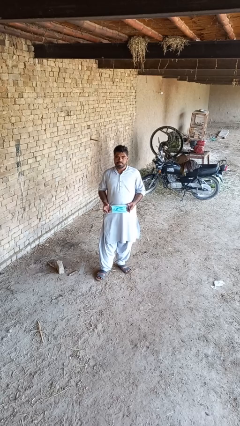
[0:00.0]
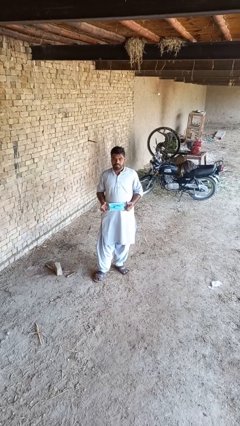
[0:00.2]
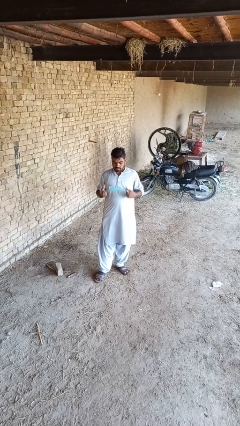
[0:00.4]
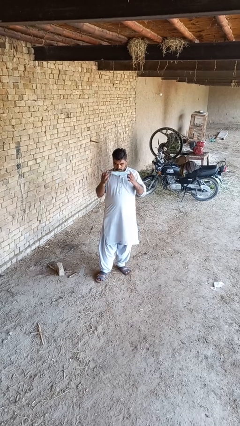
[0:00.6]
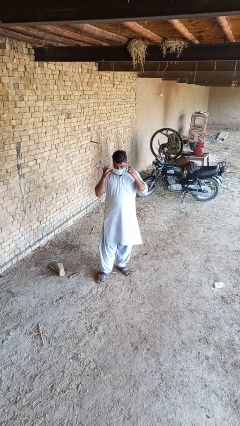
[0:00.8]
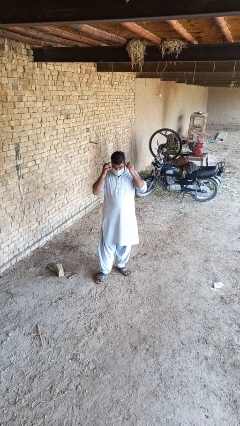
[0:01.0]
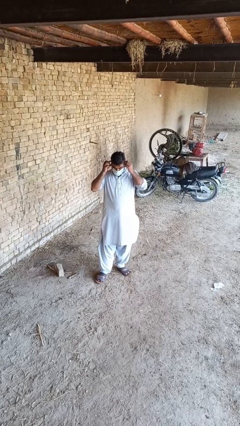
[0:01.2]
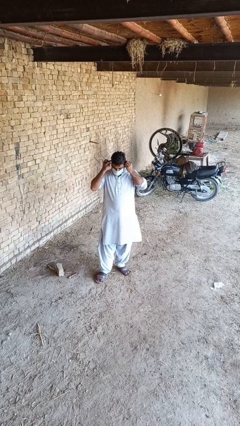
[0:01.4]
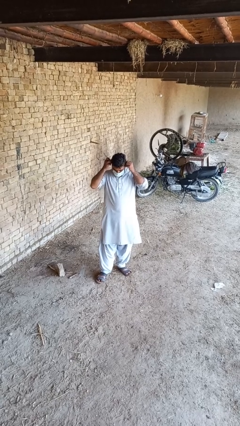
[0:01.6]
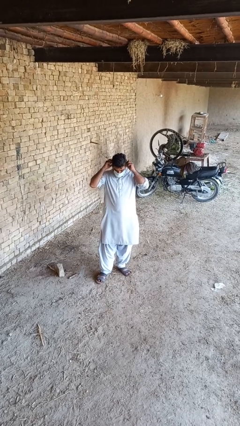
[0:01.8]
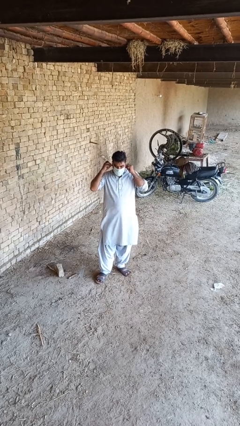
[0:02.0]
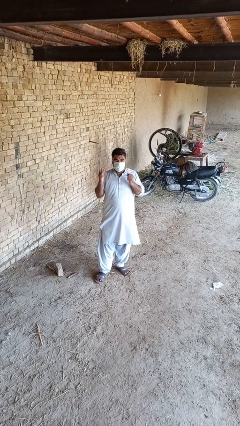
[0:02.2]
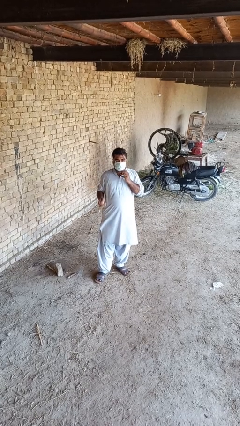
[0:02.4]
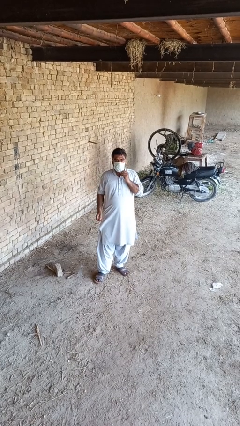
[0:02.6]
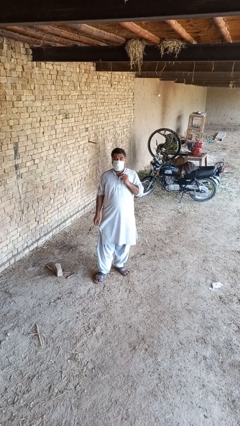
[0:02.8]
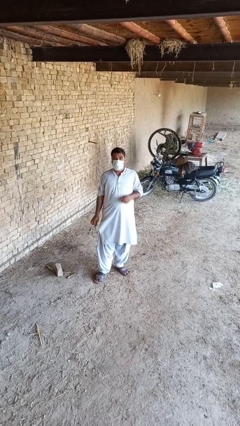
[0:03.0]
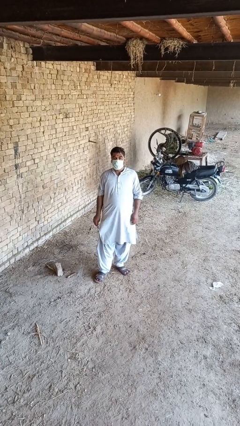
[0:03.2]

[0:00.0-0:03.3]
person puts on facemask

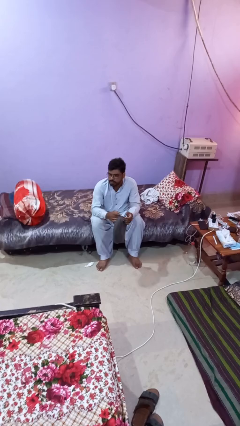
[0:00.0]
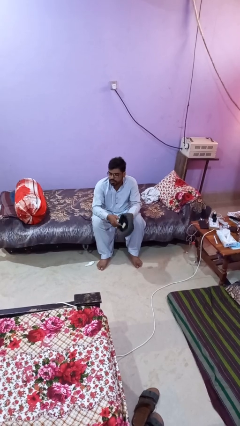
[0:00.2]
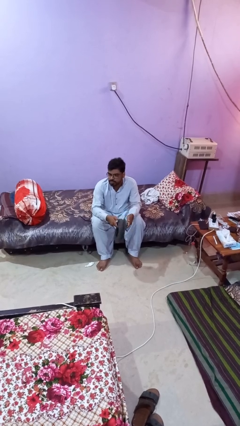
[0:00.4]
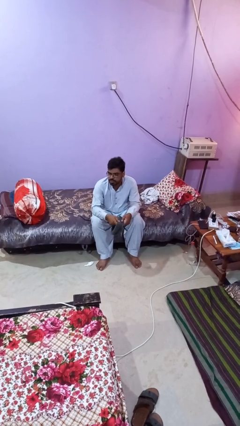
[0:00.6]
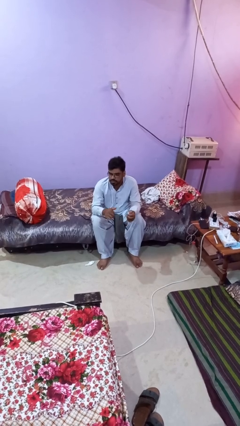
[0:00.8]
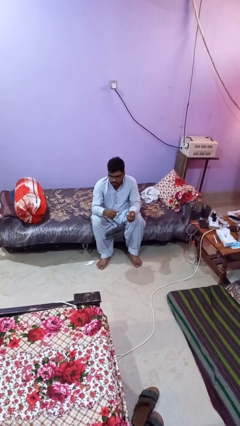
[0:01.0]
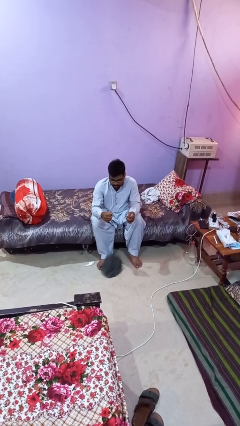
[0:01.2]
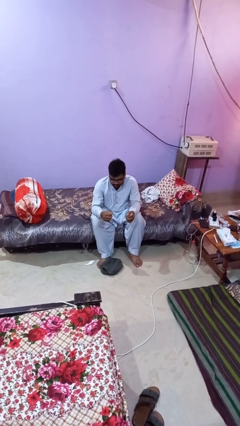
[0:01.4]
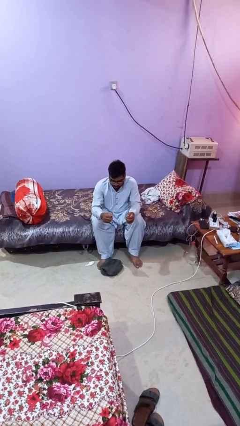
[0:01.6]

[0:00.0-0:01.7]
person drops object

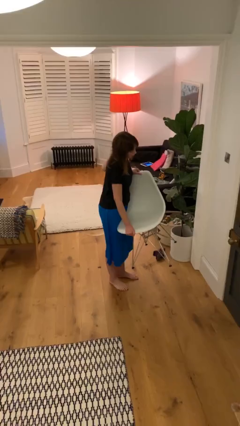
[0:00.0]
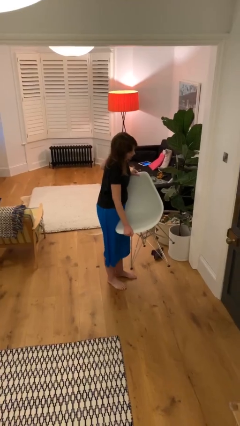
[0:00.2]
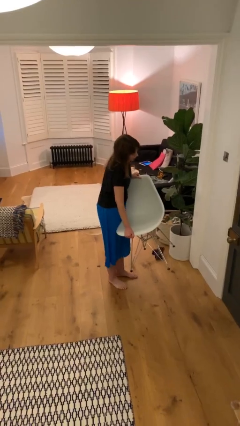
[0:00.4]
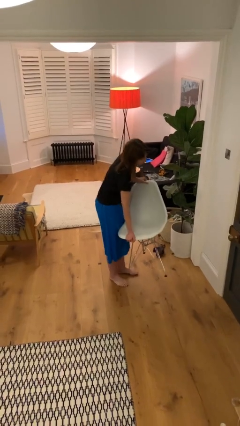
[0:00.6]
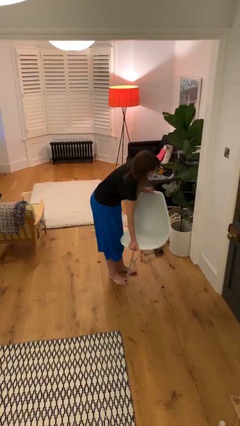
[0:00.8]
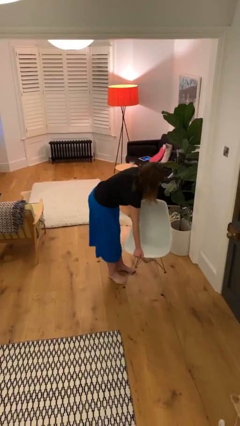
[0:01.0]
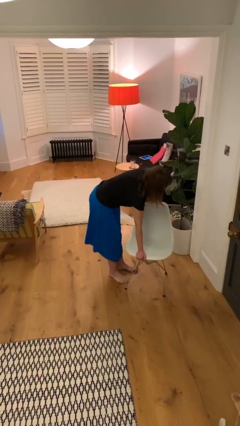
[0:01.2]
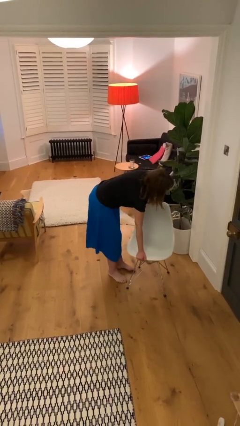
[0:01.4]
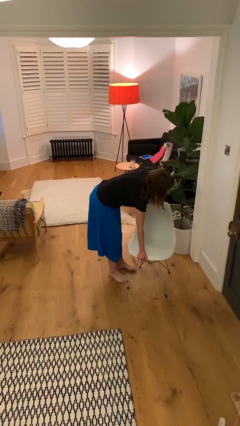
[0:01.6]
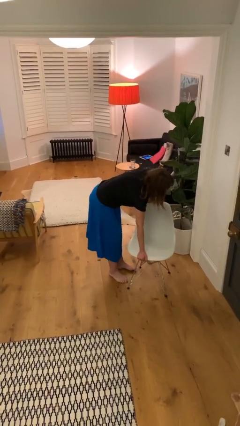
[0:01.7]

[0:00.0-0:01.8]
person puts down object on floor

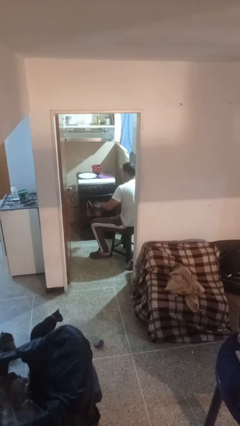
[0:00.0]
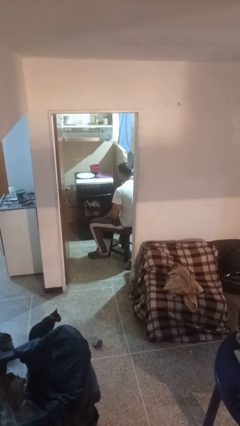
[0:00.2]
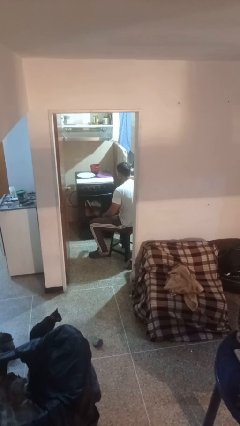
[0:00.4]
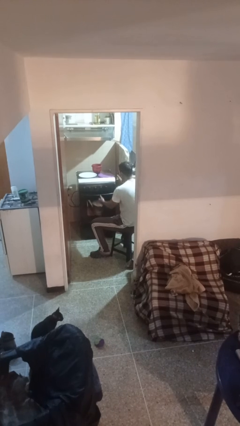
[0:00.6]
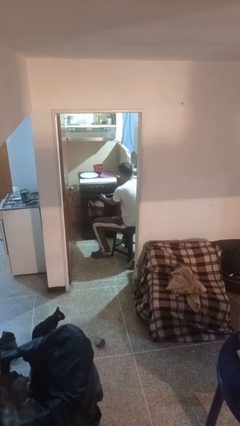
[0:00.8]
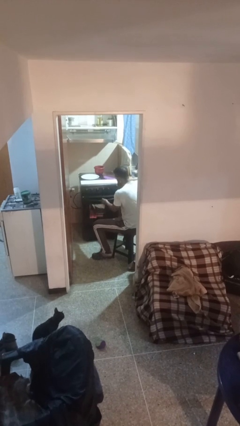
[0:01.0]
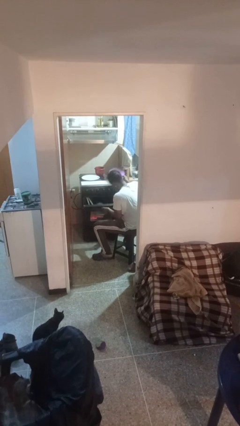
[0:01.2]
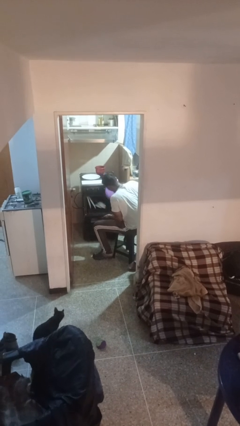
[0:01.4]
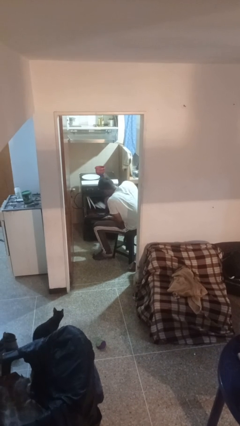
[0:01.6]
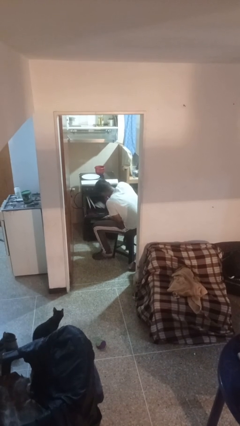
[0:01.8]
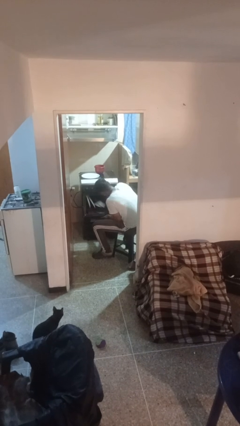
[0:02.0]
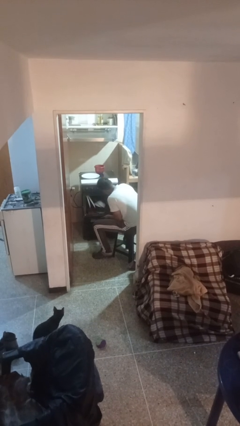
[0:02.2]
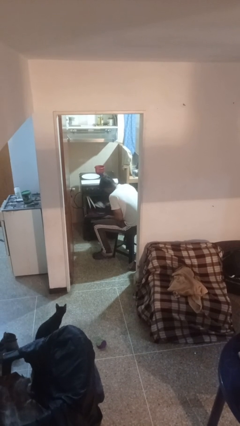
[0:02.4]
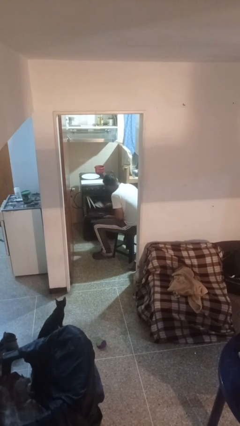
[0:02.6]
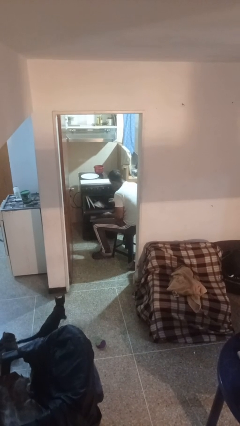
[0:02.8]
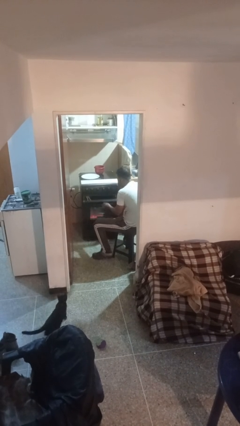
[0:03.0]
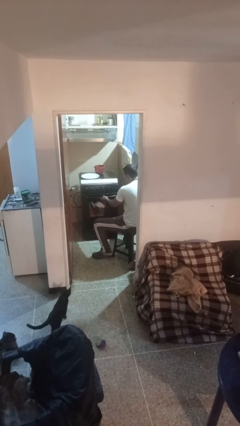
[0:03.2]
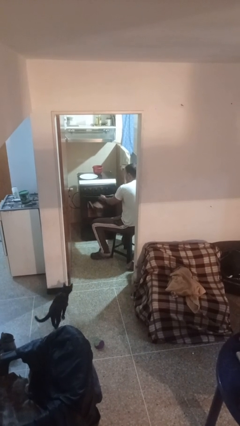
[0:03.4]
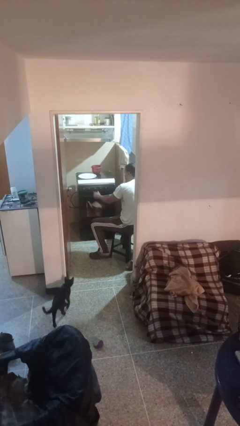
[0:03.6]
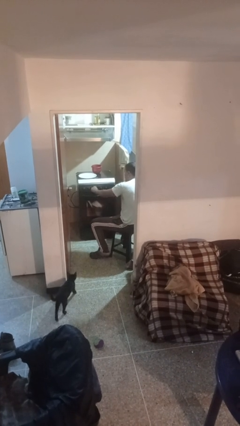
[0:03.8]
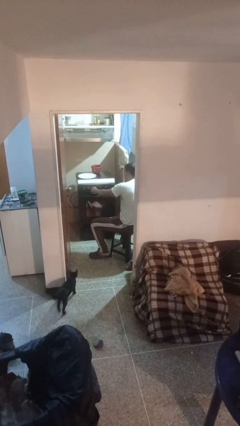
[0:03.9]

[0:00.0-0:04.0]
person loads dishwasher

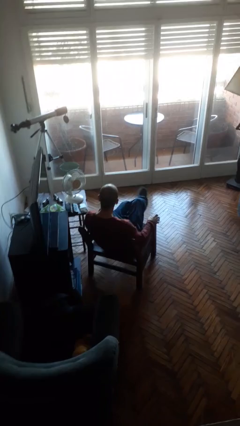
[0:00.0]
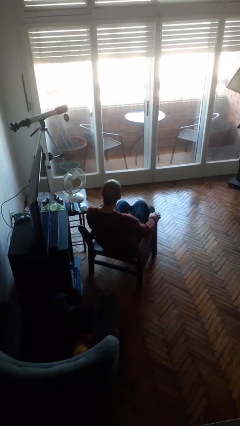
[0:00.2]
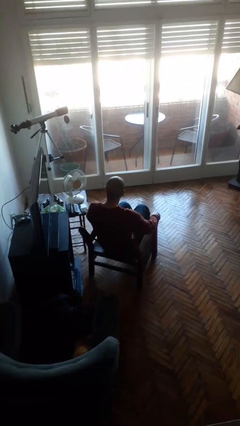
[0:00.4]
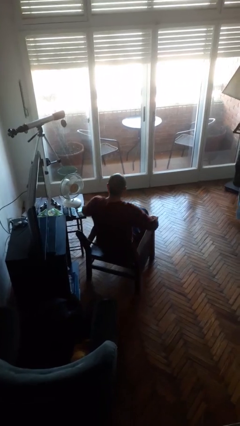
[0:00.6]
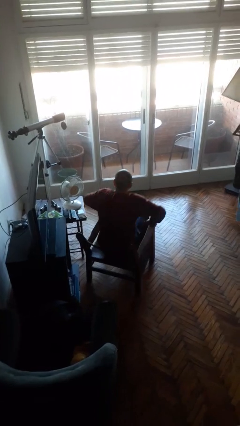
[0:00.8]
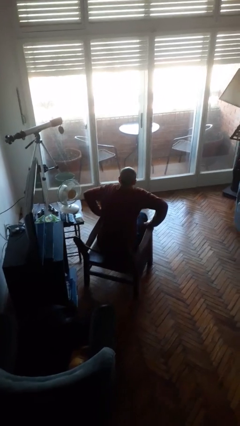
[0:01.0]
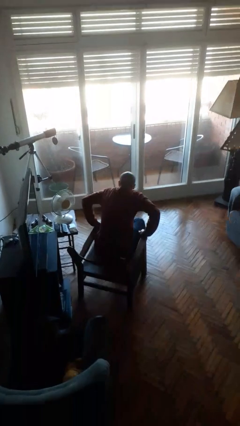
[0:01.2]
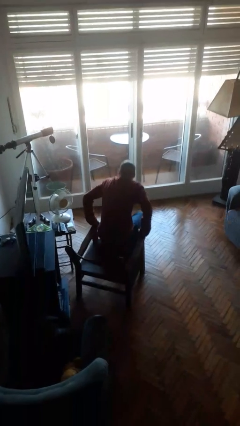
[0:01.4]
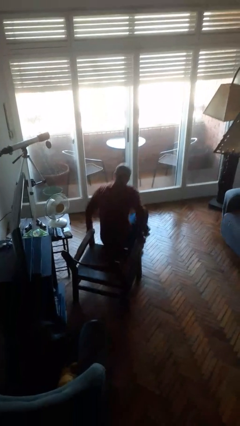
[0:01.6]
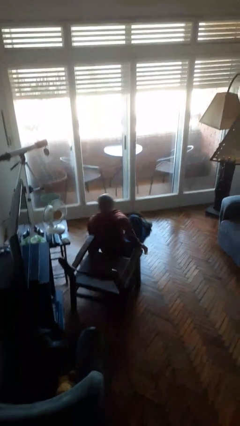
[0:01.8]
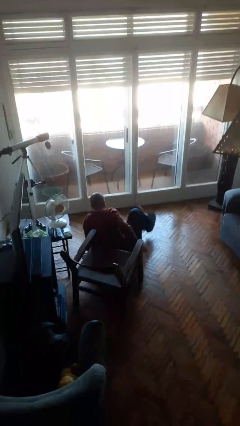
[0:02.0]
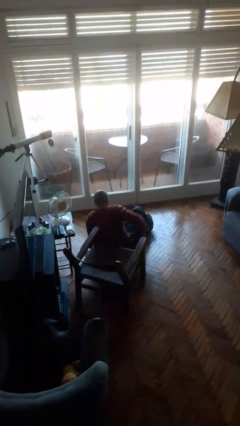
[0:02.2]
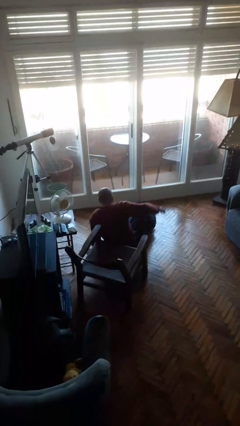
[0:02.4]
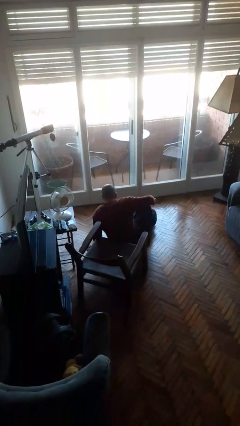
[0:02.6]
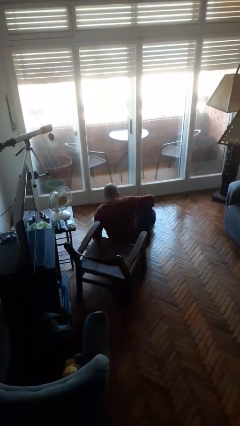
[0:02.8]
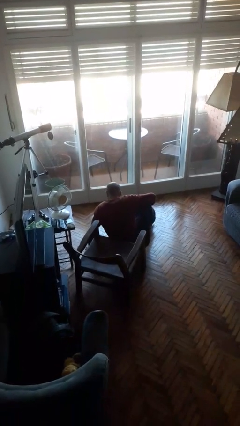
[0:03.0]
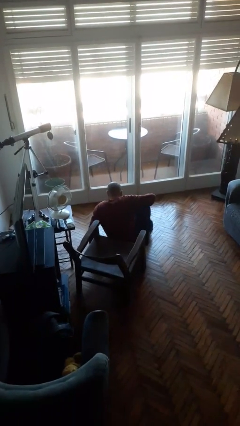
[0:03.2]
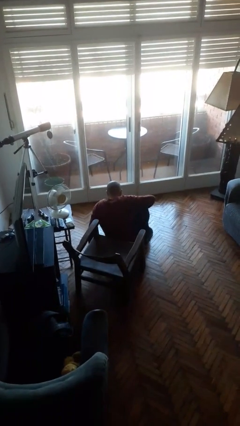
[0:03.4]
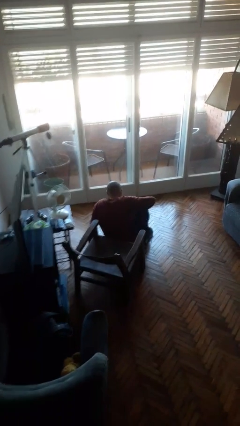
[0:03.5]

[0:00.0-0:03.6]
person falls from chair

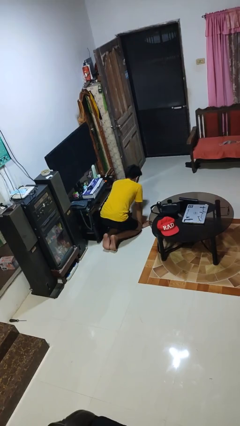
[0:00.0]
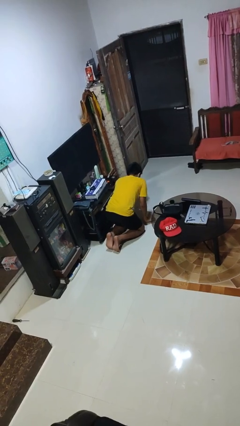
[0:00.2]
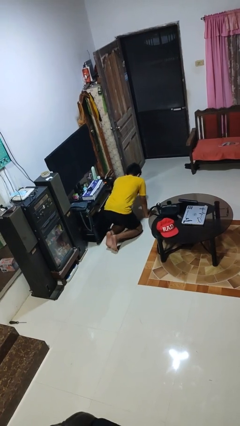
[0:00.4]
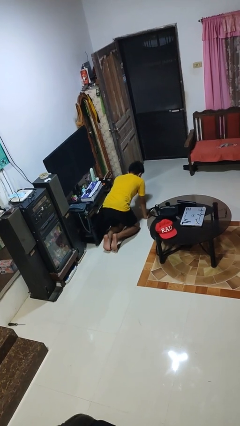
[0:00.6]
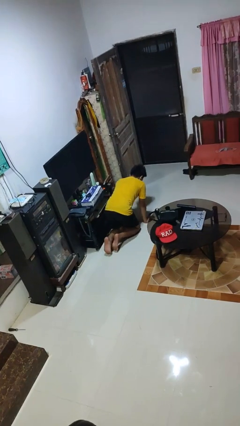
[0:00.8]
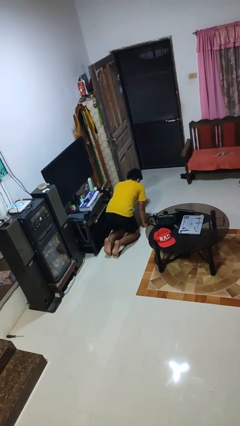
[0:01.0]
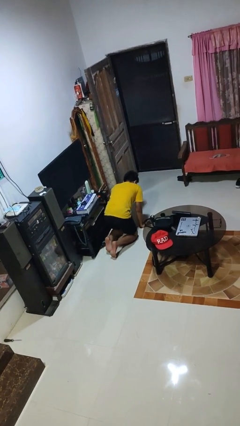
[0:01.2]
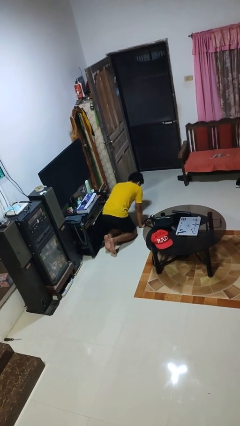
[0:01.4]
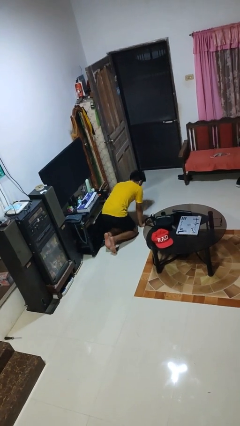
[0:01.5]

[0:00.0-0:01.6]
person crawls

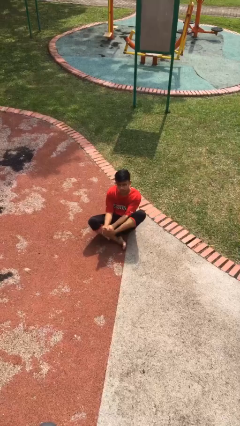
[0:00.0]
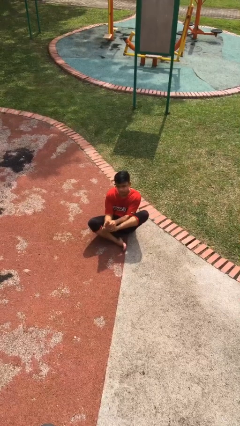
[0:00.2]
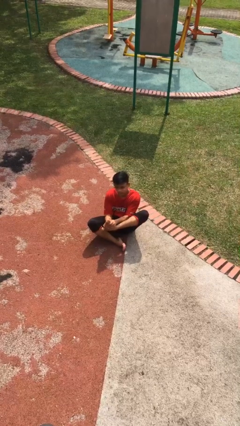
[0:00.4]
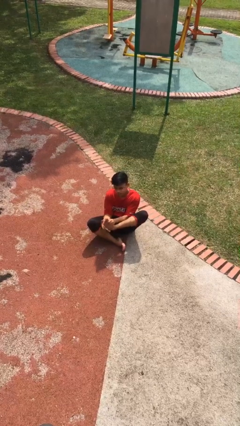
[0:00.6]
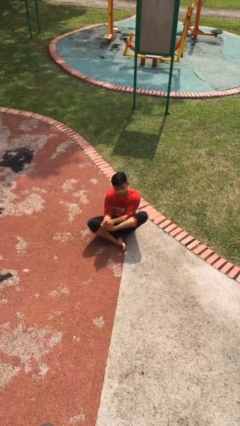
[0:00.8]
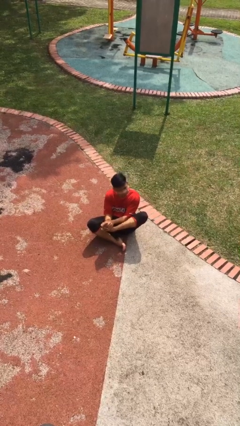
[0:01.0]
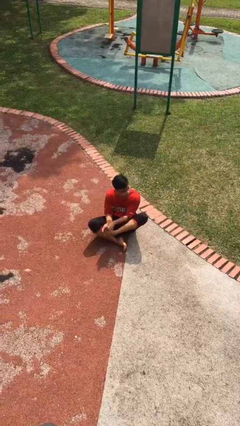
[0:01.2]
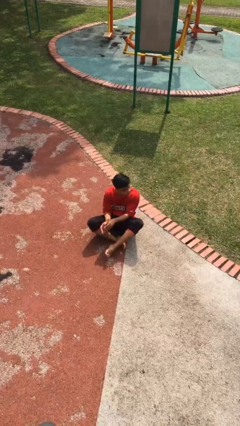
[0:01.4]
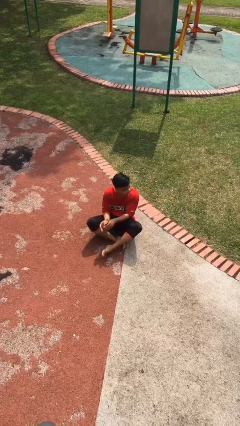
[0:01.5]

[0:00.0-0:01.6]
person rubs foot
